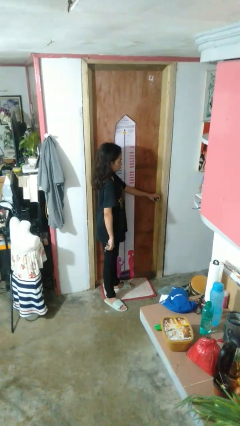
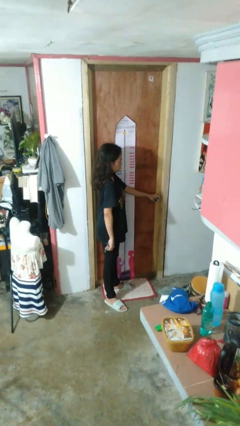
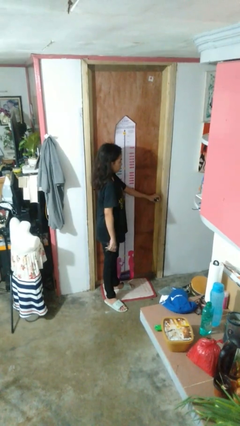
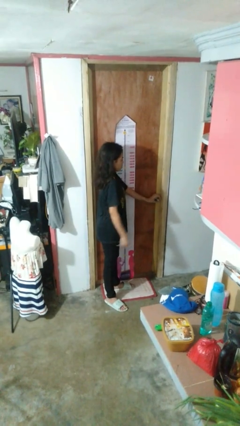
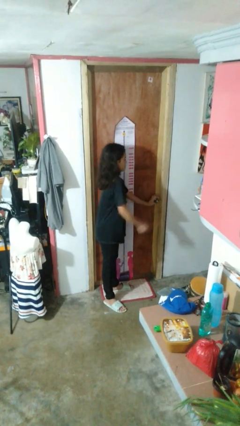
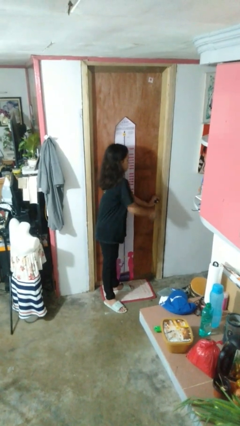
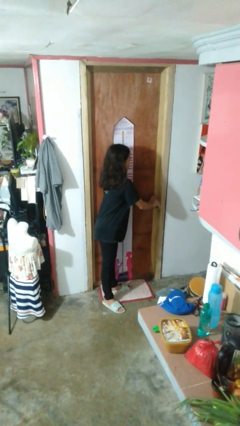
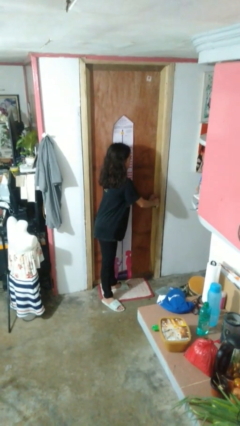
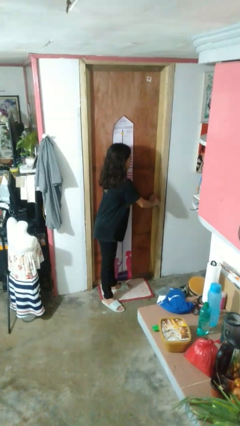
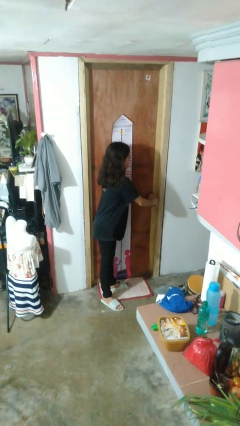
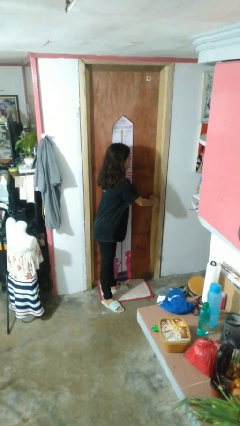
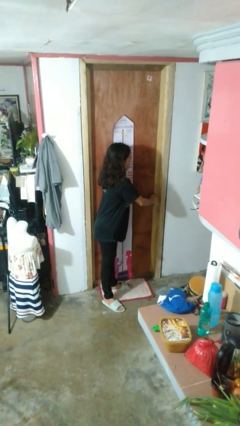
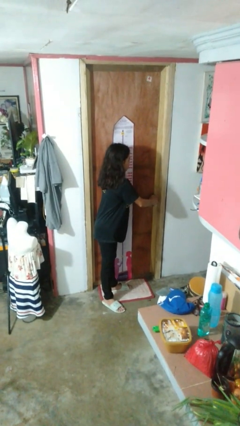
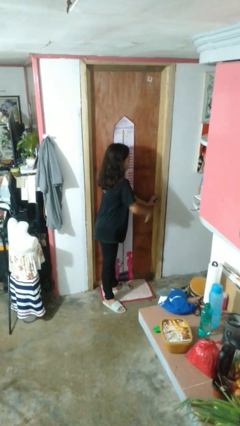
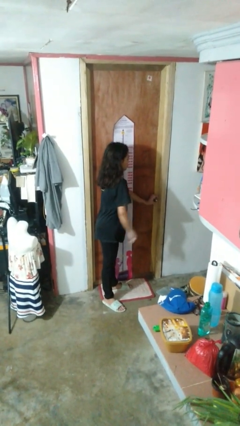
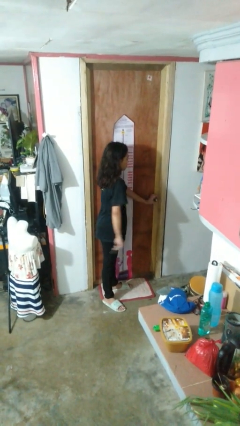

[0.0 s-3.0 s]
person unlocks door with keys

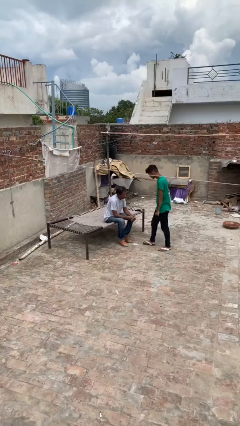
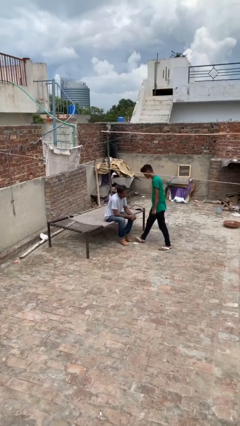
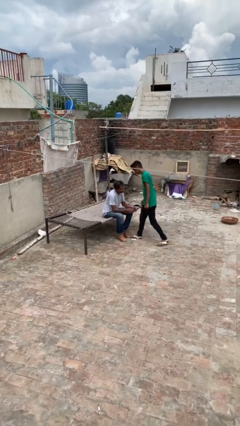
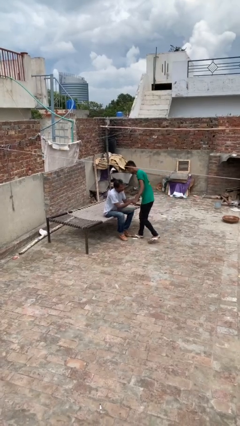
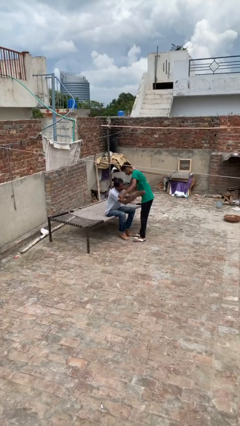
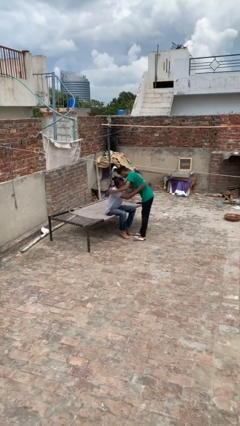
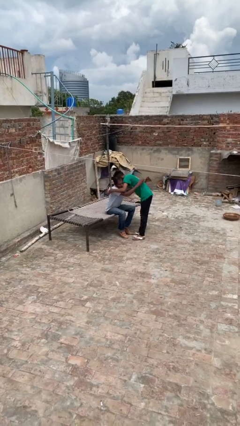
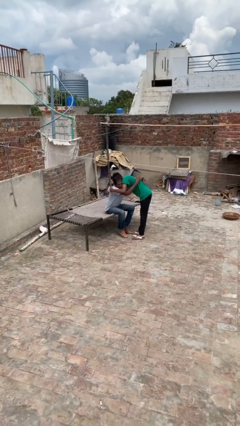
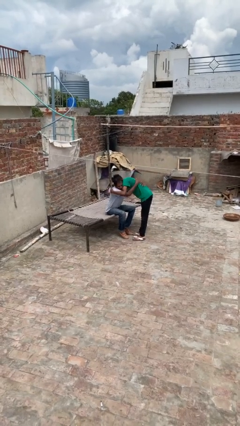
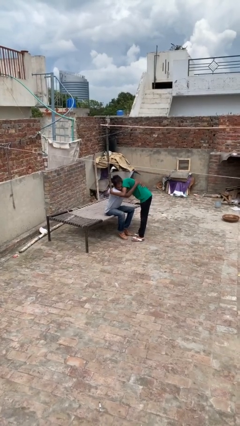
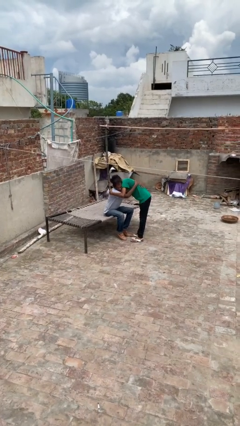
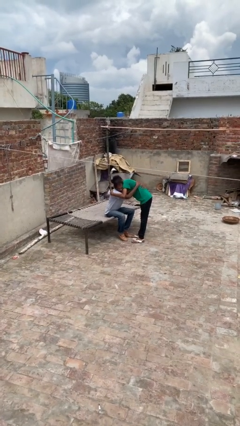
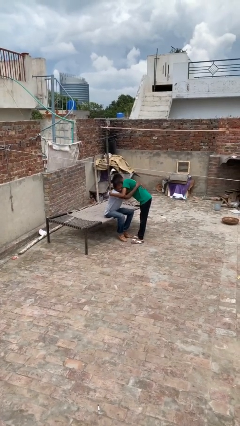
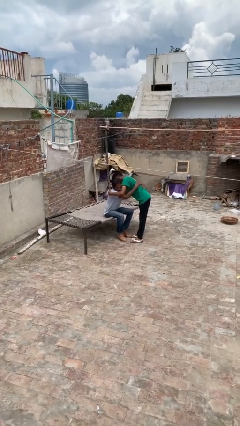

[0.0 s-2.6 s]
person embraces person

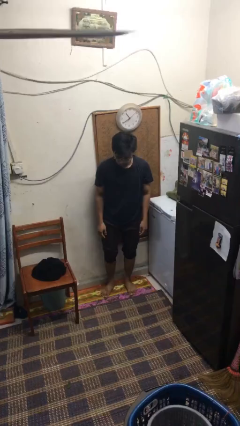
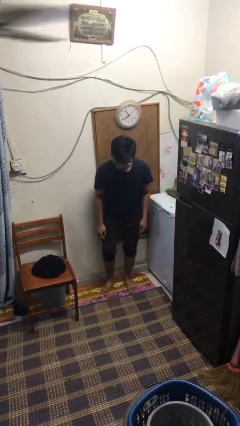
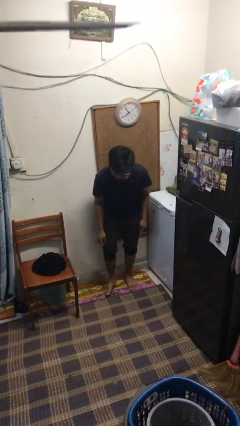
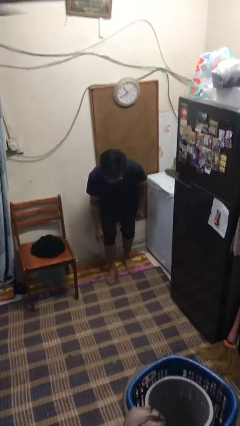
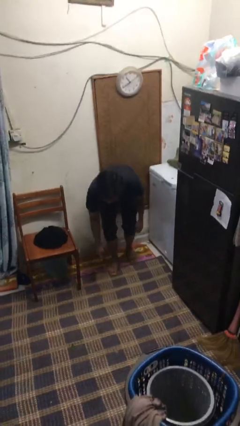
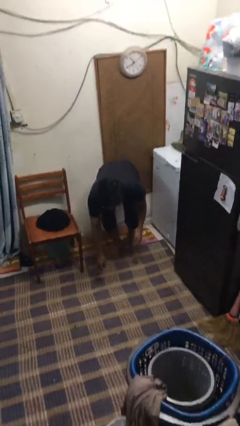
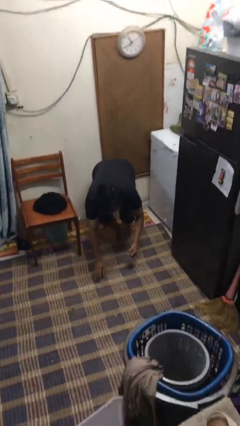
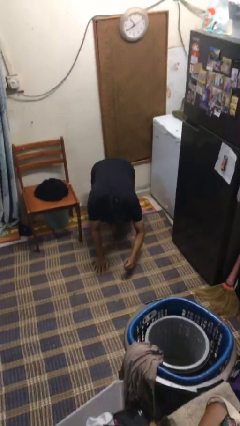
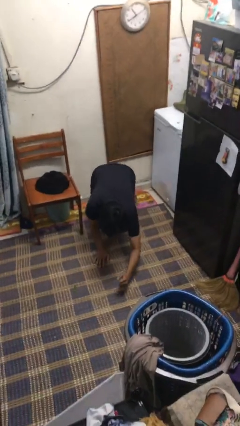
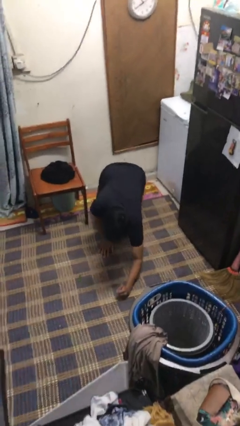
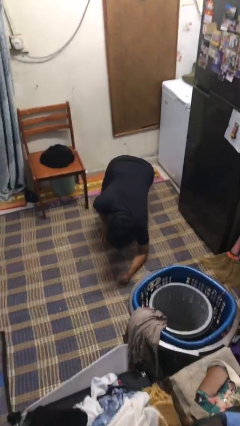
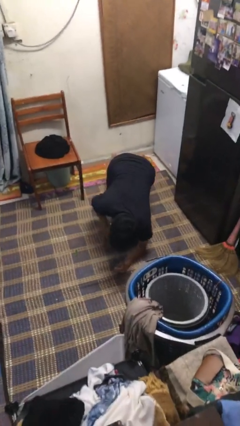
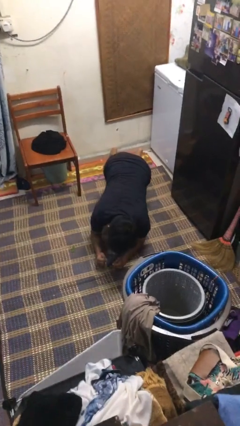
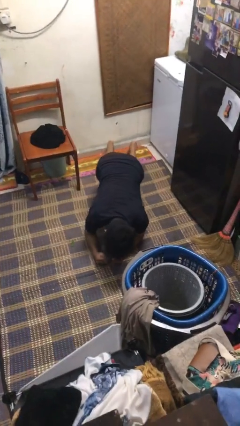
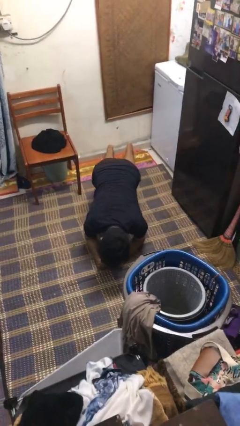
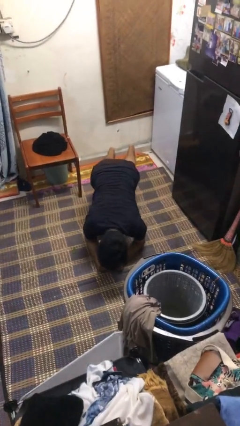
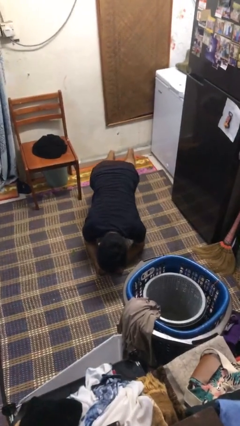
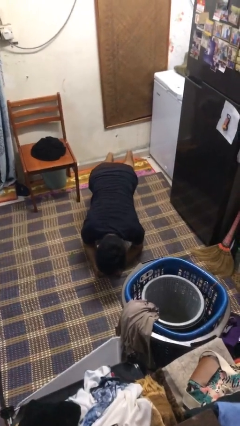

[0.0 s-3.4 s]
person exercises with plank

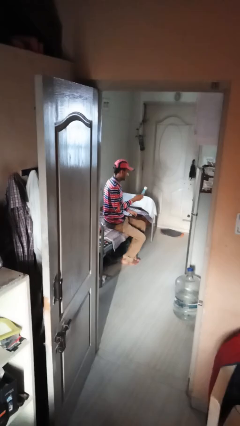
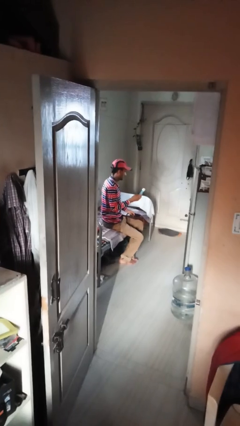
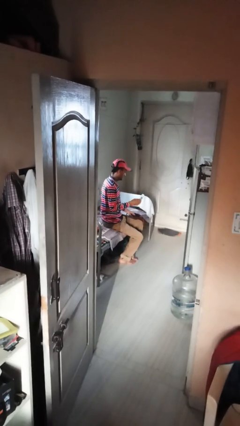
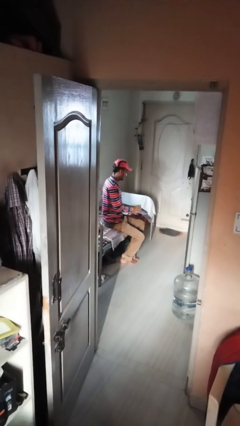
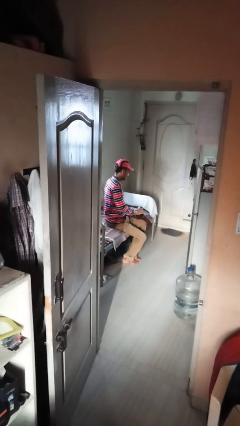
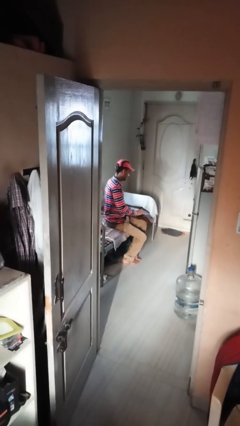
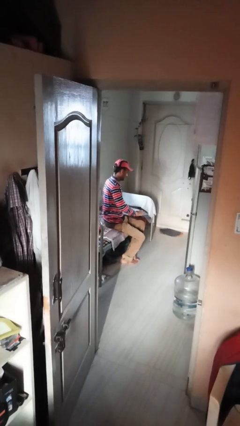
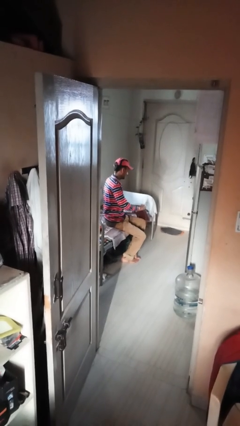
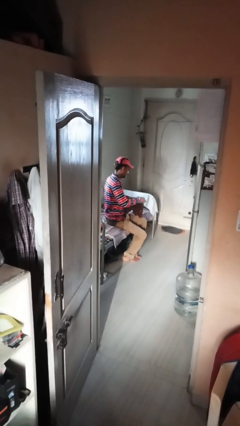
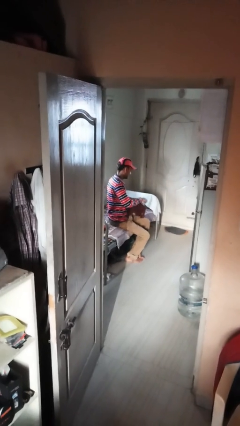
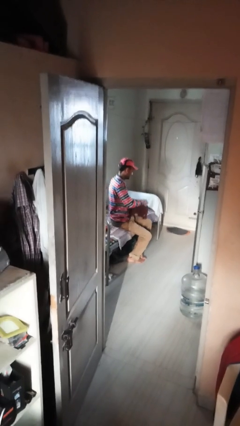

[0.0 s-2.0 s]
person puts object into purse

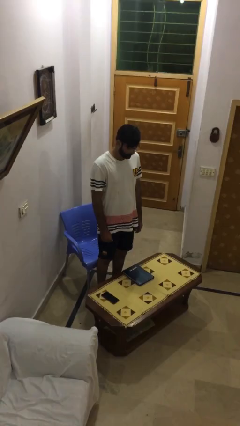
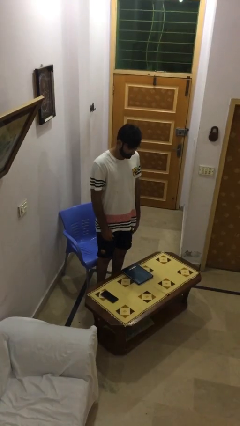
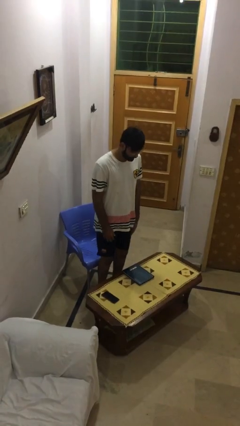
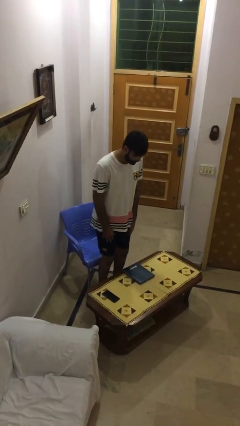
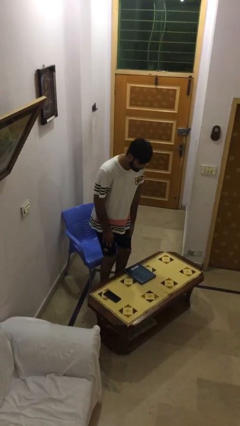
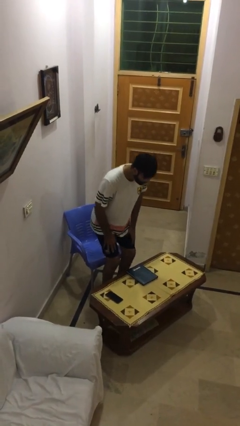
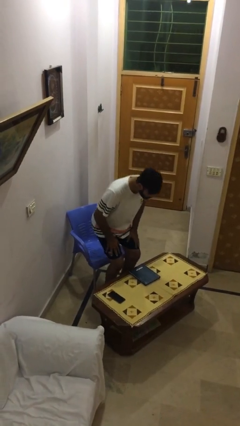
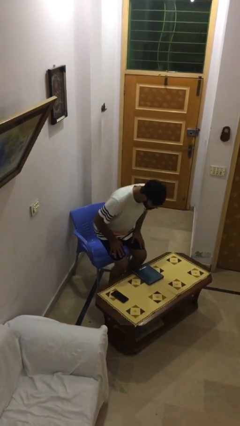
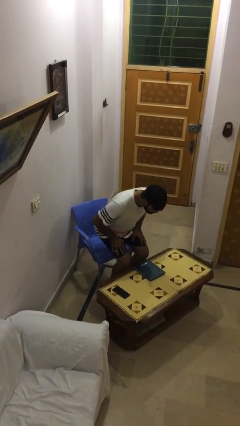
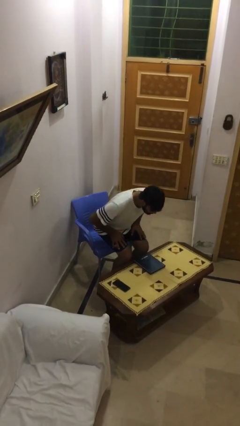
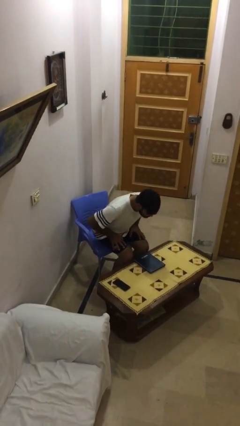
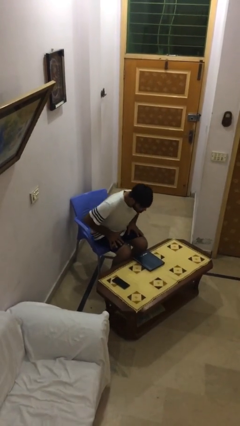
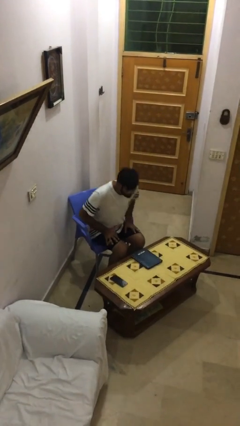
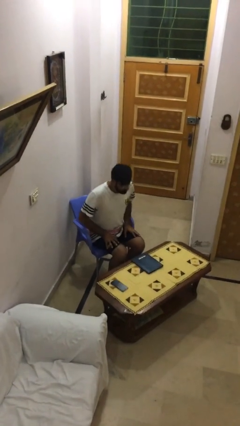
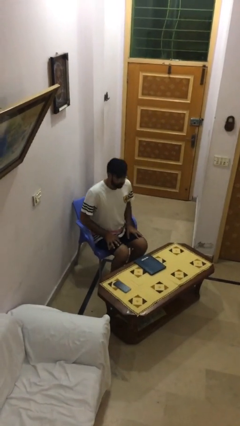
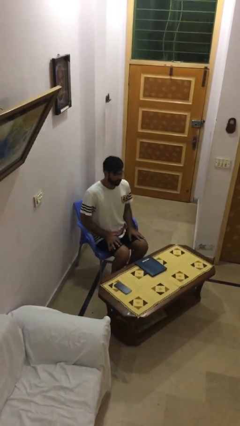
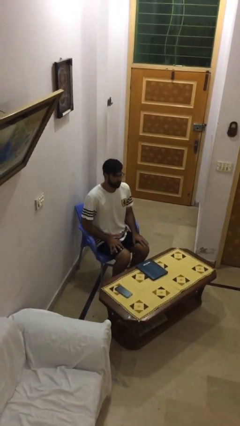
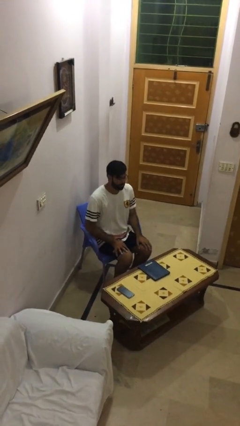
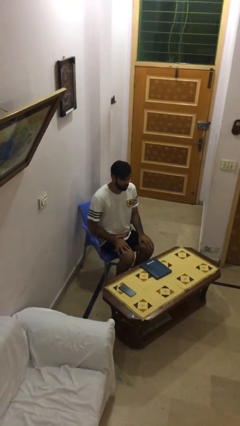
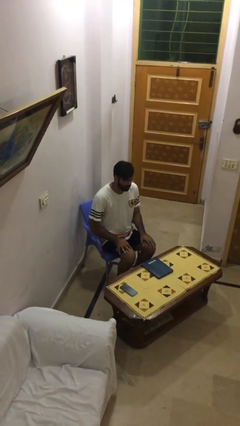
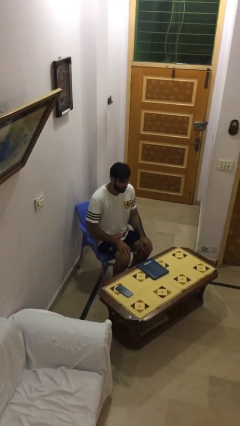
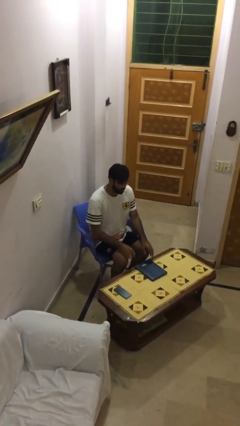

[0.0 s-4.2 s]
person sits down

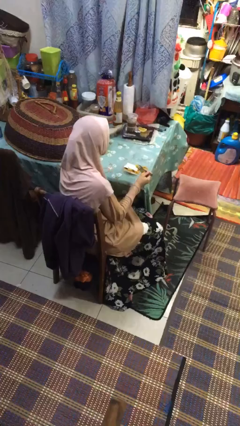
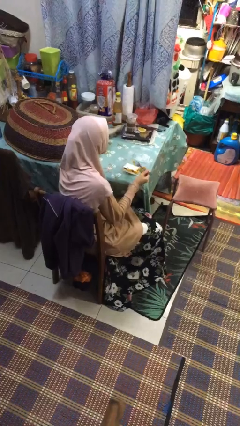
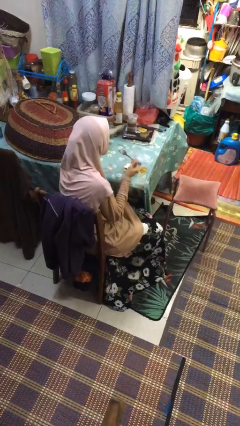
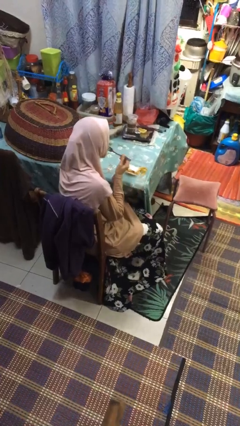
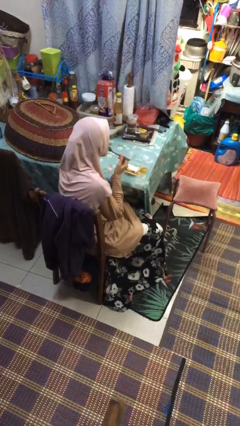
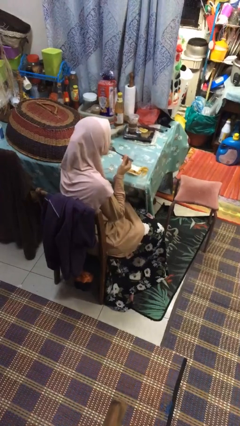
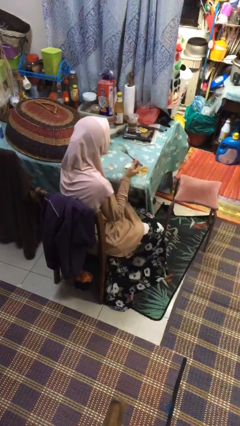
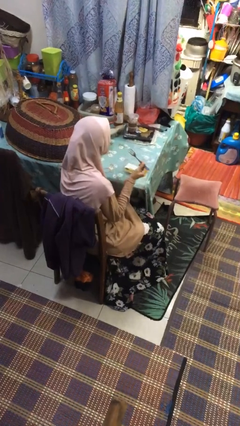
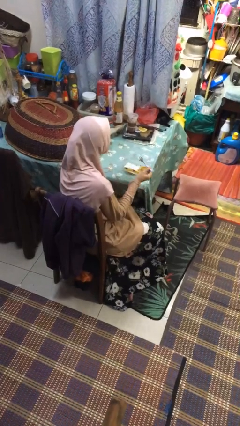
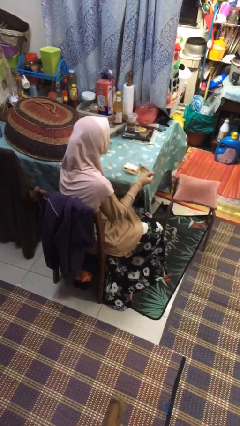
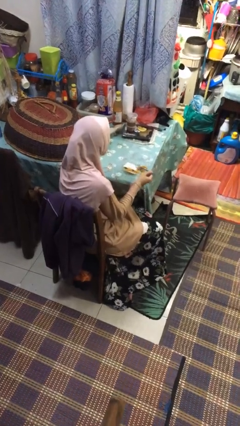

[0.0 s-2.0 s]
person eats with utensil
